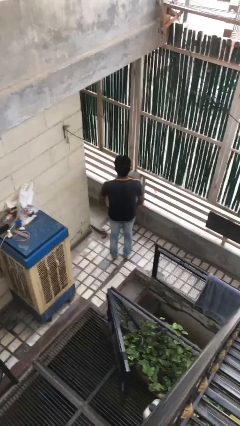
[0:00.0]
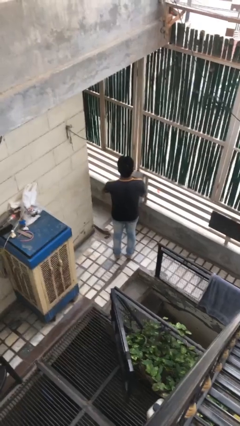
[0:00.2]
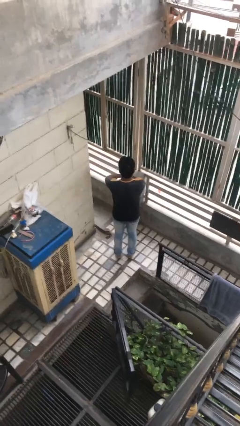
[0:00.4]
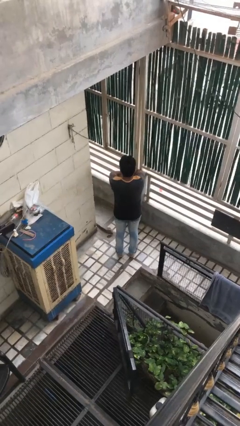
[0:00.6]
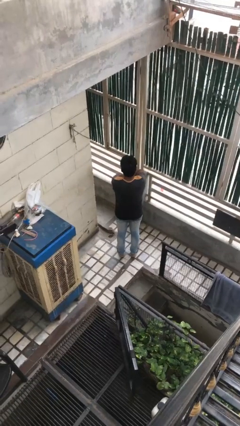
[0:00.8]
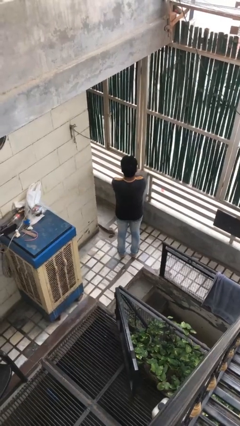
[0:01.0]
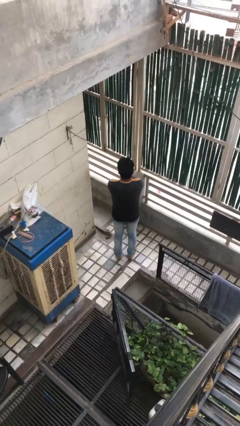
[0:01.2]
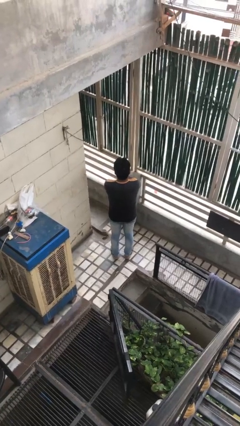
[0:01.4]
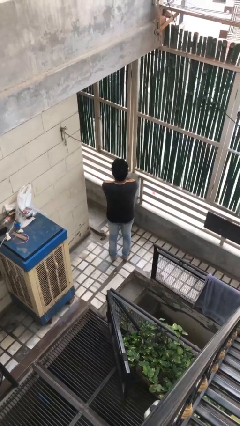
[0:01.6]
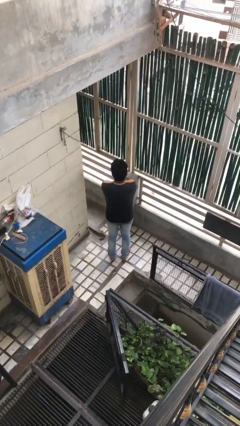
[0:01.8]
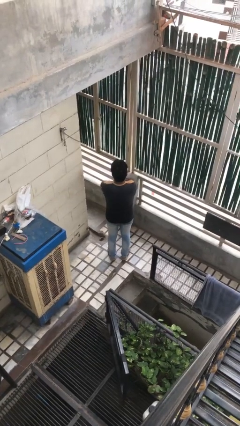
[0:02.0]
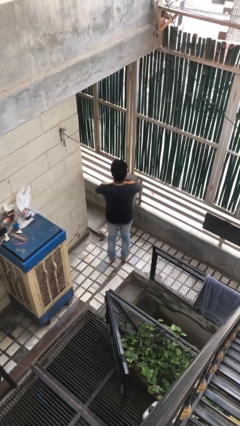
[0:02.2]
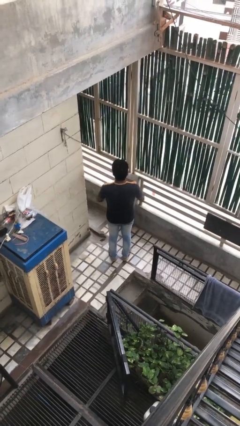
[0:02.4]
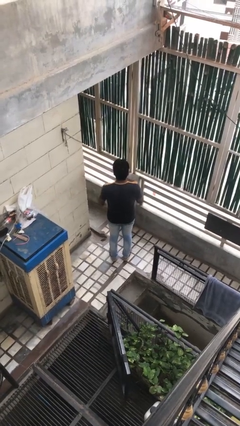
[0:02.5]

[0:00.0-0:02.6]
person crosses arms

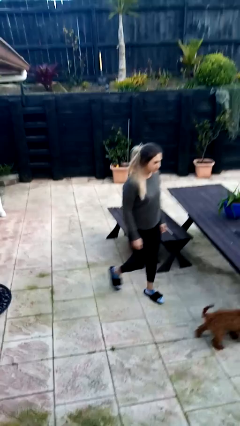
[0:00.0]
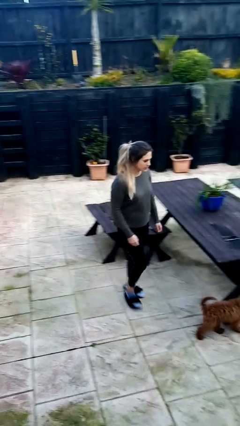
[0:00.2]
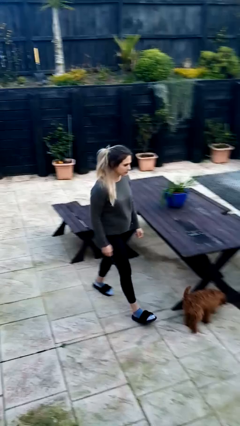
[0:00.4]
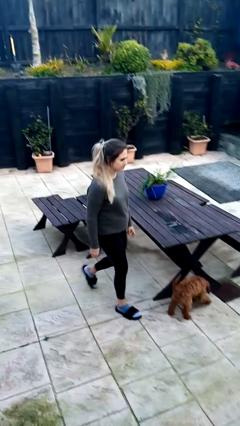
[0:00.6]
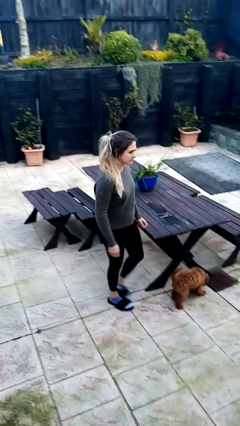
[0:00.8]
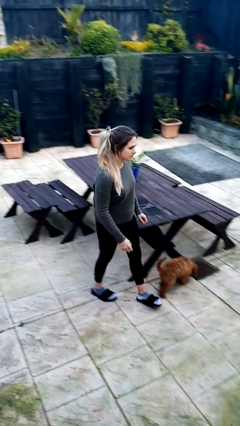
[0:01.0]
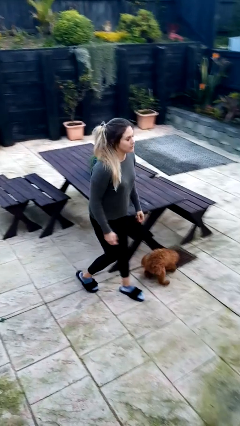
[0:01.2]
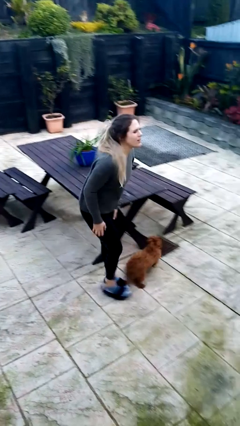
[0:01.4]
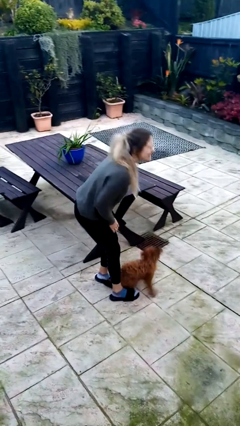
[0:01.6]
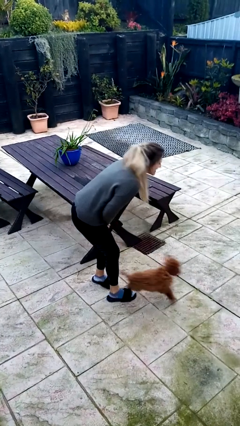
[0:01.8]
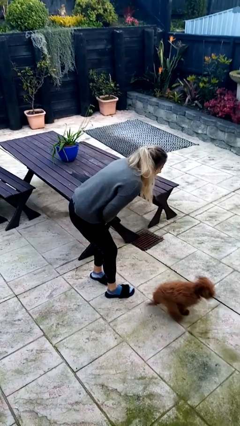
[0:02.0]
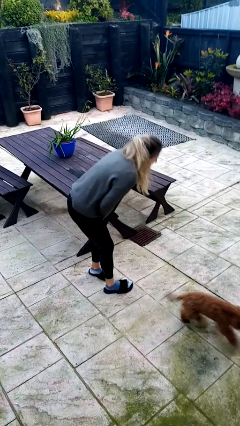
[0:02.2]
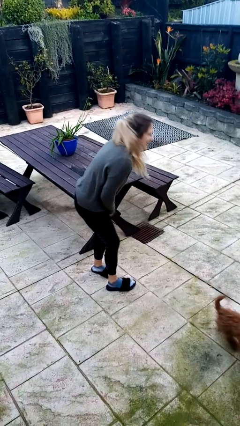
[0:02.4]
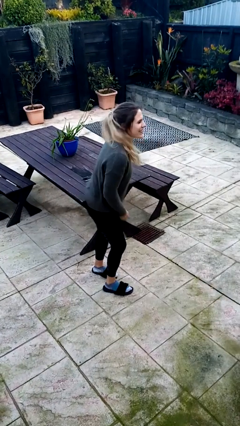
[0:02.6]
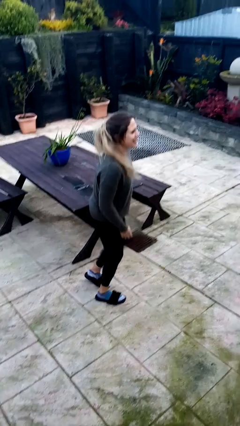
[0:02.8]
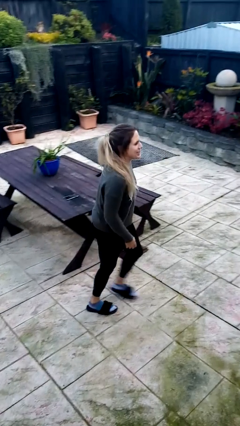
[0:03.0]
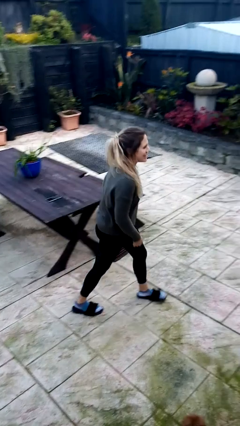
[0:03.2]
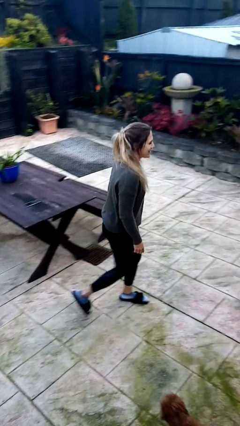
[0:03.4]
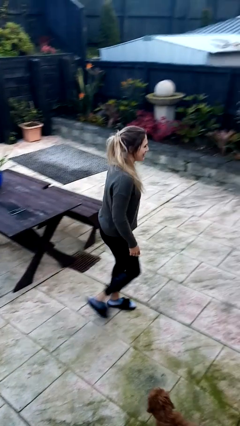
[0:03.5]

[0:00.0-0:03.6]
person bumps into table

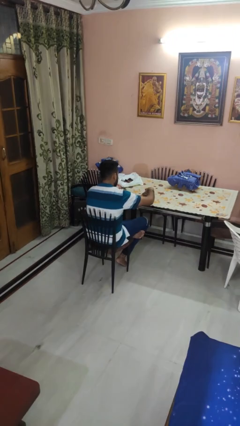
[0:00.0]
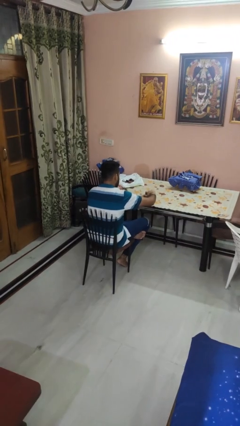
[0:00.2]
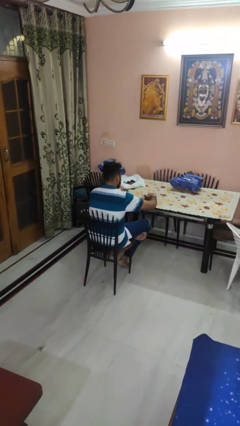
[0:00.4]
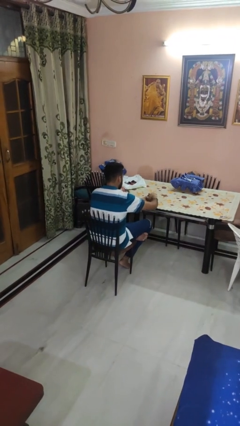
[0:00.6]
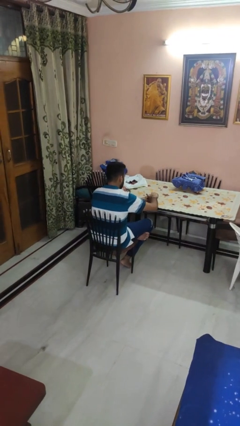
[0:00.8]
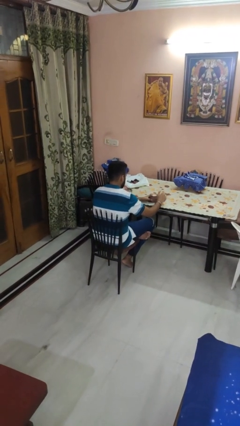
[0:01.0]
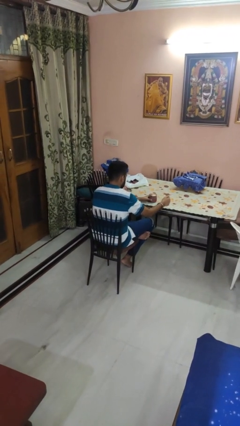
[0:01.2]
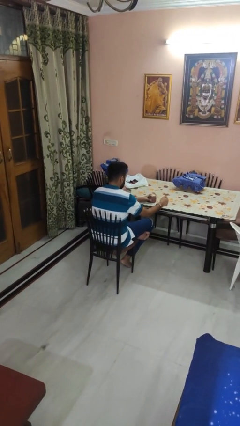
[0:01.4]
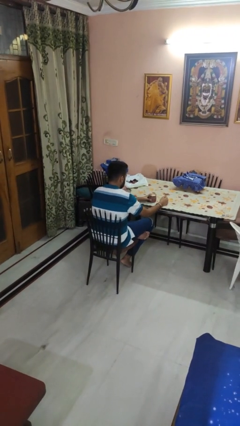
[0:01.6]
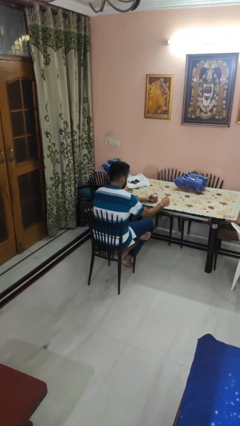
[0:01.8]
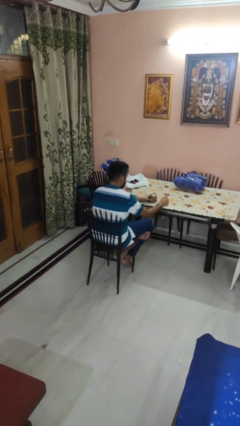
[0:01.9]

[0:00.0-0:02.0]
person closes jar

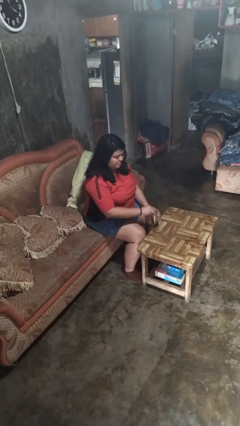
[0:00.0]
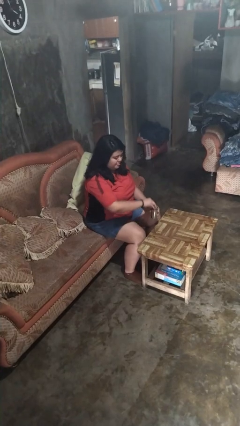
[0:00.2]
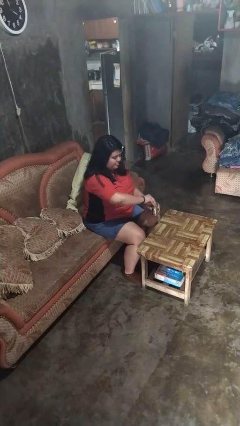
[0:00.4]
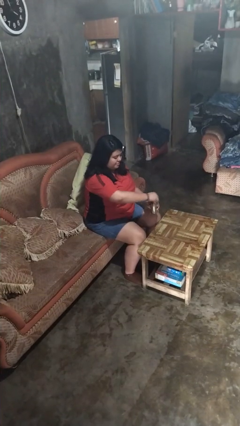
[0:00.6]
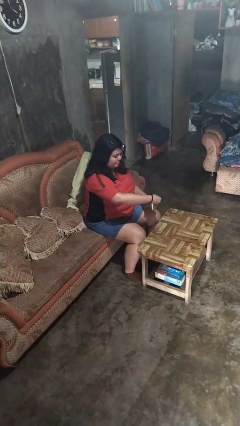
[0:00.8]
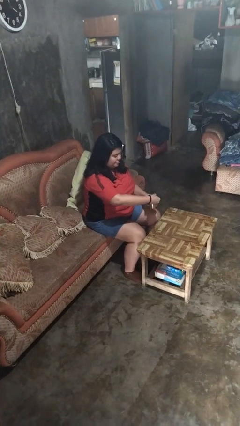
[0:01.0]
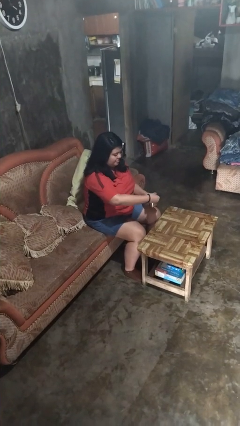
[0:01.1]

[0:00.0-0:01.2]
person opens beverage can

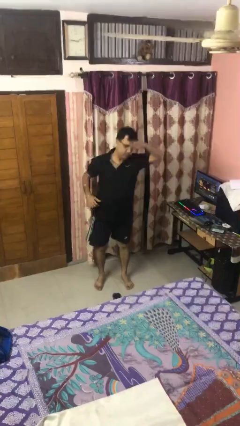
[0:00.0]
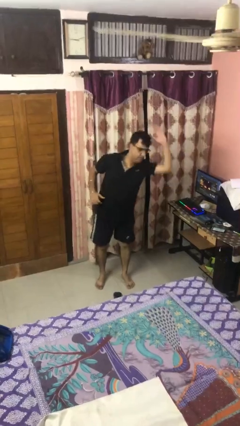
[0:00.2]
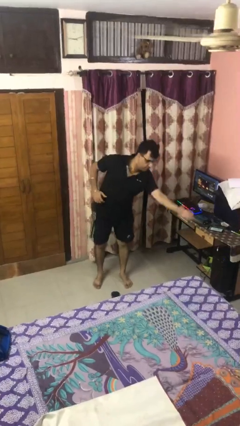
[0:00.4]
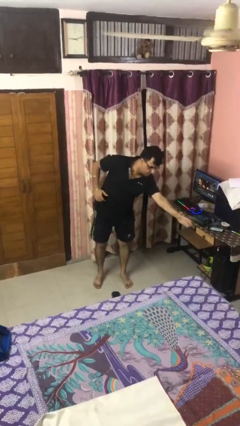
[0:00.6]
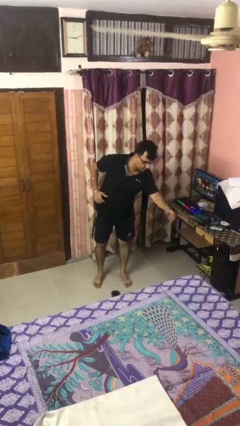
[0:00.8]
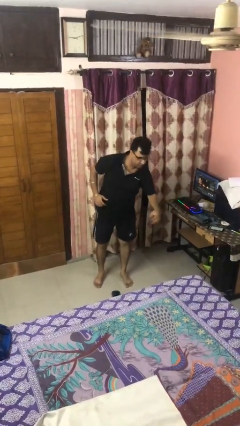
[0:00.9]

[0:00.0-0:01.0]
person karate chop

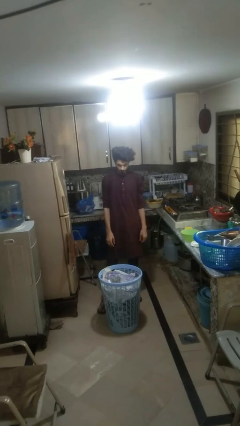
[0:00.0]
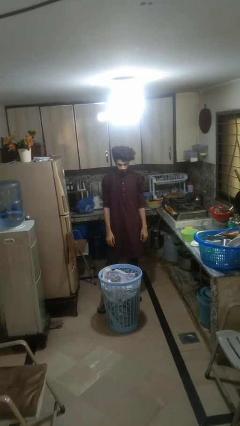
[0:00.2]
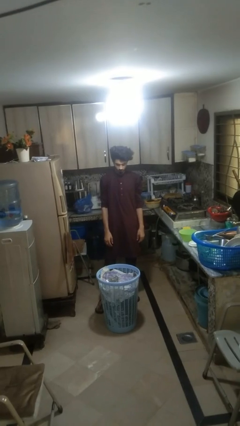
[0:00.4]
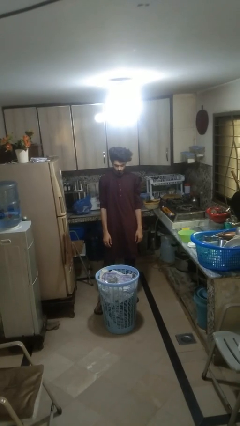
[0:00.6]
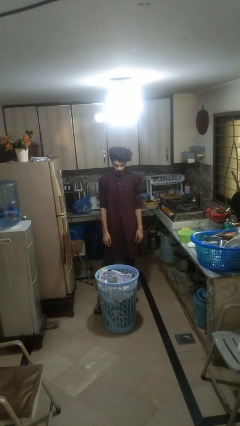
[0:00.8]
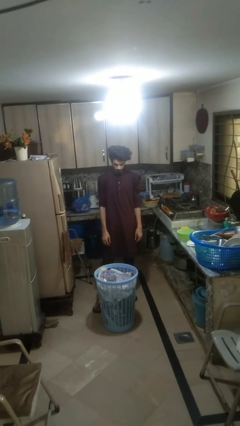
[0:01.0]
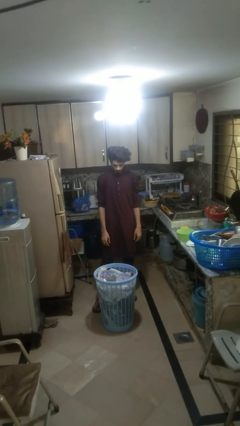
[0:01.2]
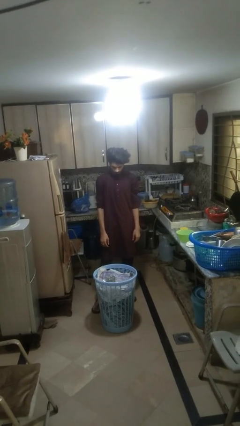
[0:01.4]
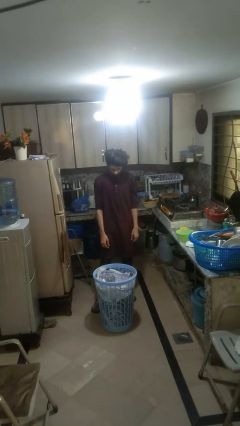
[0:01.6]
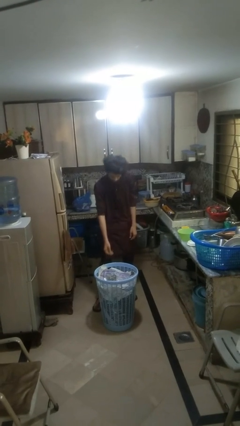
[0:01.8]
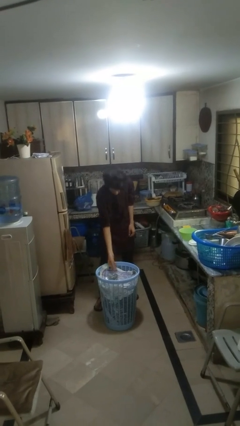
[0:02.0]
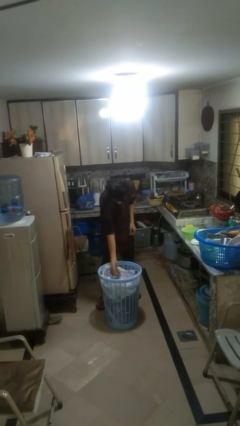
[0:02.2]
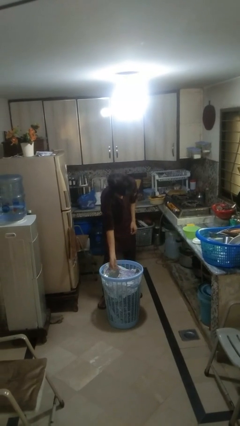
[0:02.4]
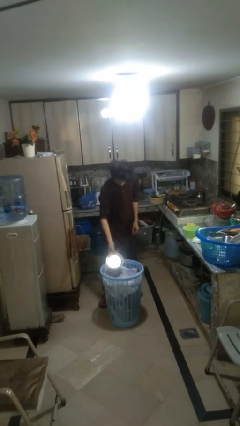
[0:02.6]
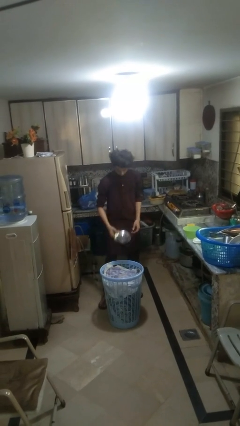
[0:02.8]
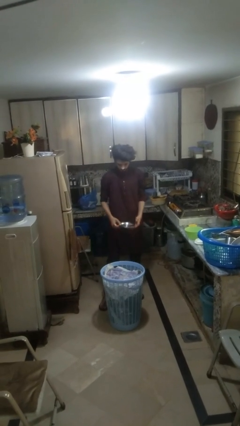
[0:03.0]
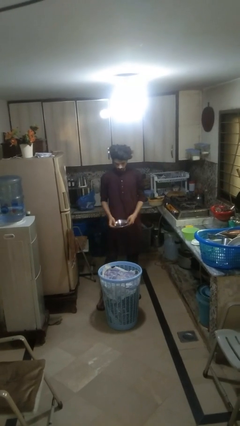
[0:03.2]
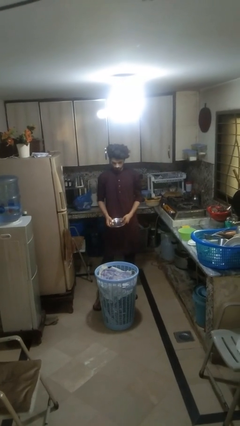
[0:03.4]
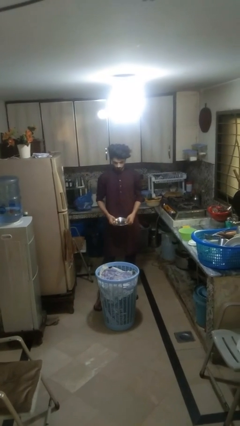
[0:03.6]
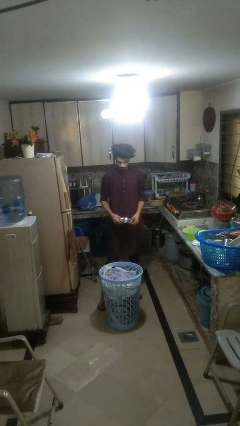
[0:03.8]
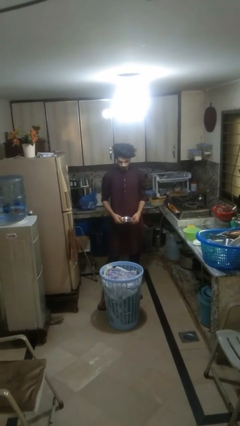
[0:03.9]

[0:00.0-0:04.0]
person takes object from basket

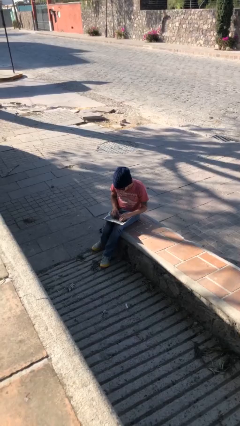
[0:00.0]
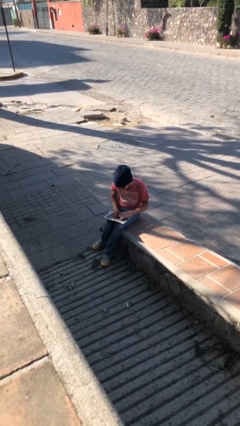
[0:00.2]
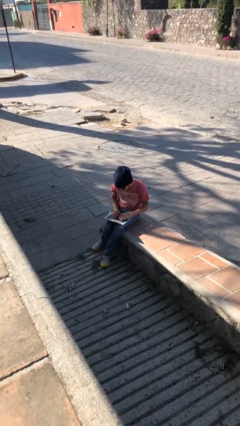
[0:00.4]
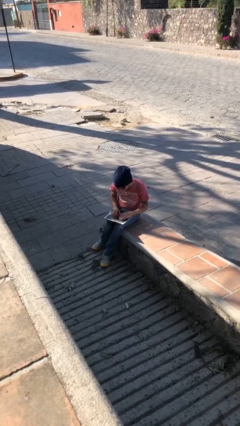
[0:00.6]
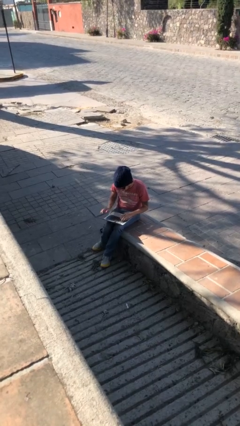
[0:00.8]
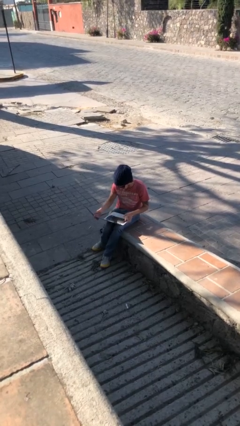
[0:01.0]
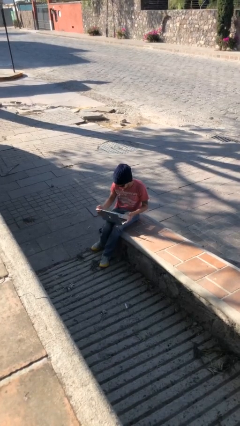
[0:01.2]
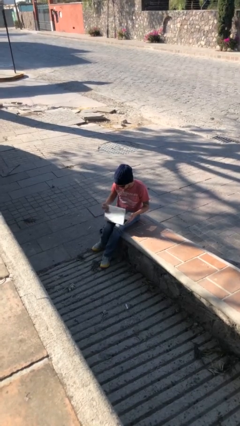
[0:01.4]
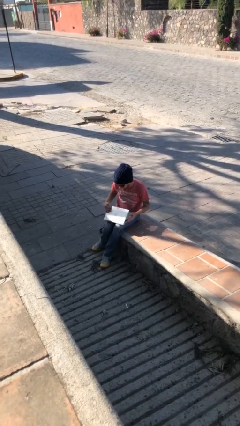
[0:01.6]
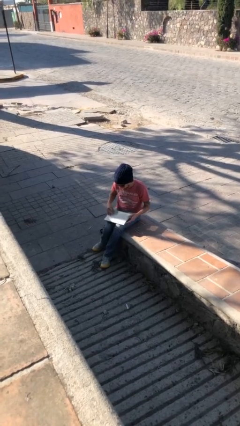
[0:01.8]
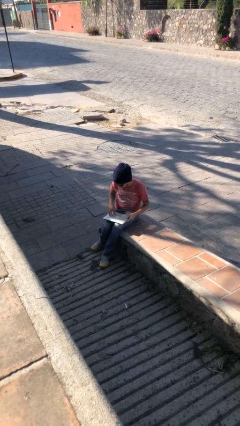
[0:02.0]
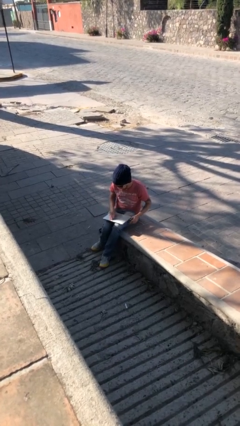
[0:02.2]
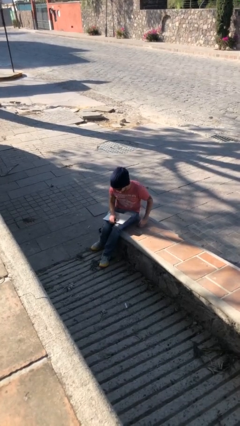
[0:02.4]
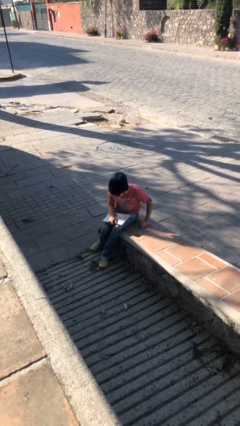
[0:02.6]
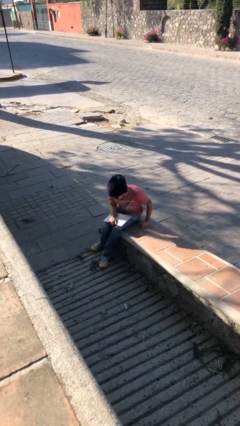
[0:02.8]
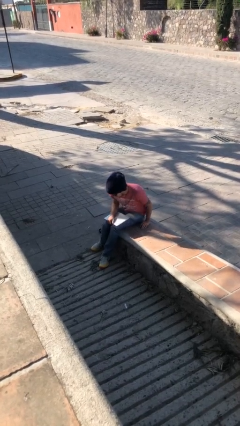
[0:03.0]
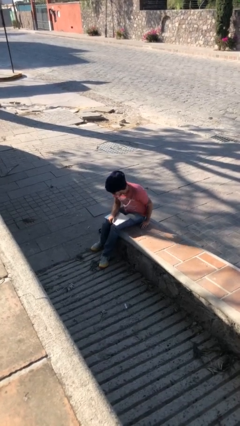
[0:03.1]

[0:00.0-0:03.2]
person interacts with laptop
